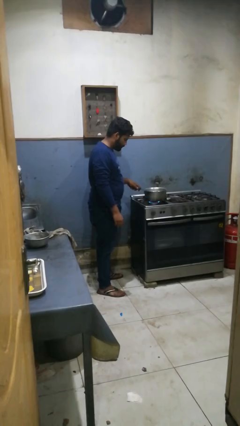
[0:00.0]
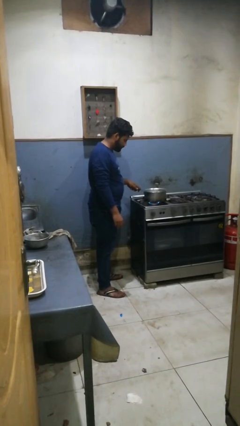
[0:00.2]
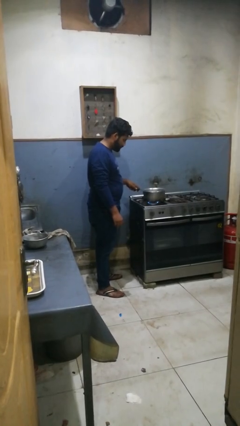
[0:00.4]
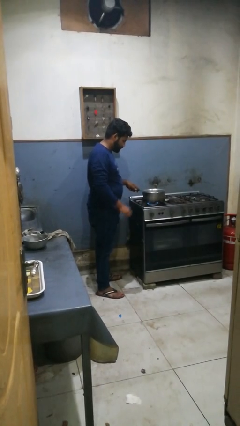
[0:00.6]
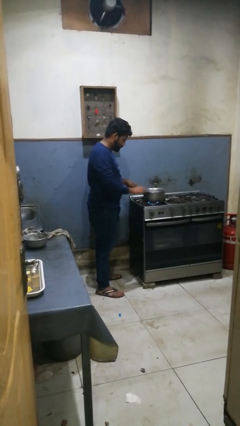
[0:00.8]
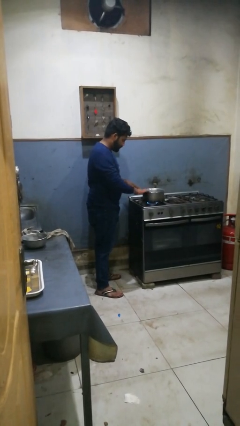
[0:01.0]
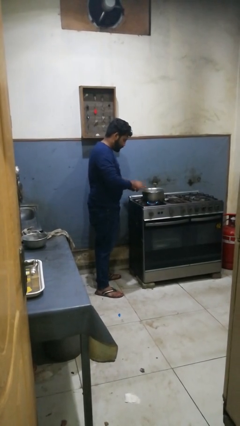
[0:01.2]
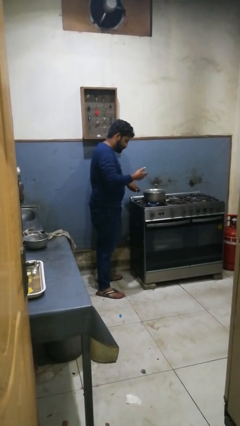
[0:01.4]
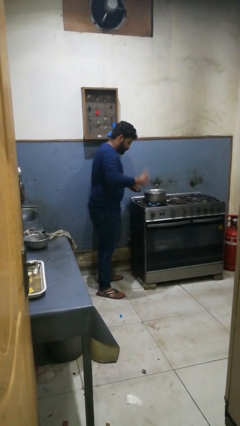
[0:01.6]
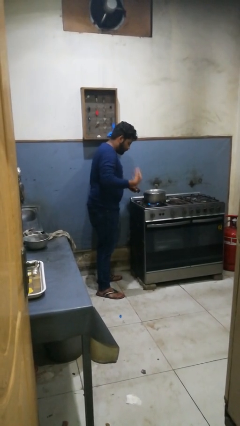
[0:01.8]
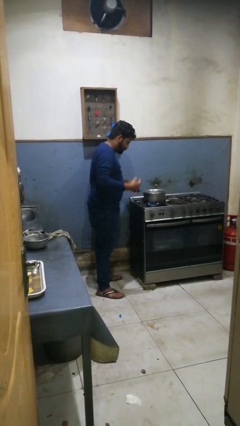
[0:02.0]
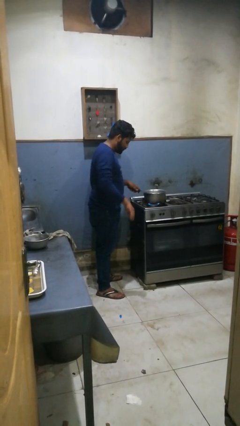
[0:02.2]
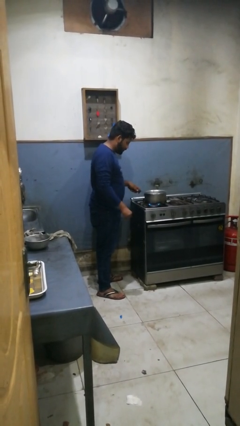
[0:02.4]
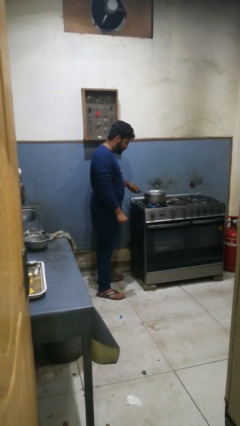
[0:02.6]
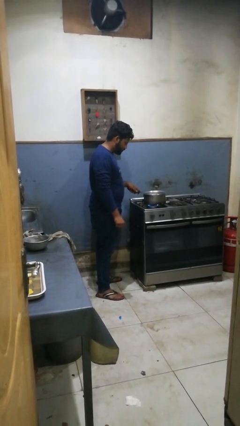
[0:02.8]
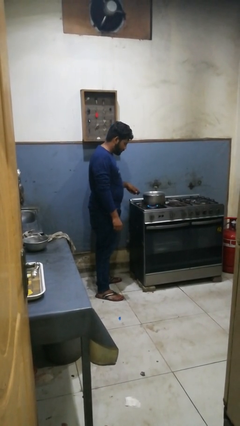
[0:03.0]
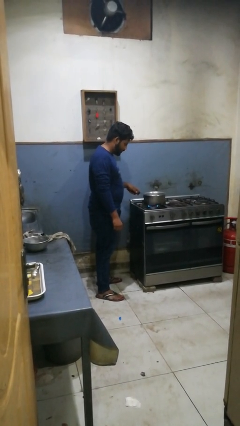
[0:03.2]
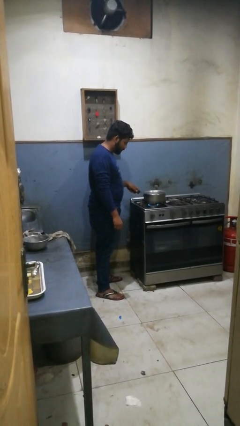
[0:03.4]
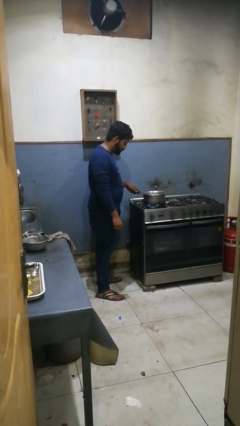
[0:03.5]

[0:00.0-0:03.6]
person burns hand

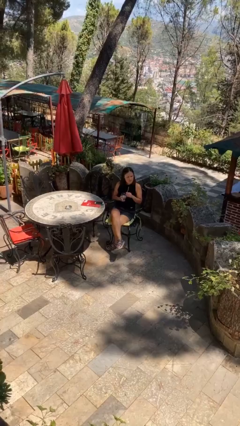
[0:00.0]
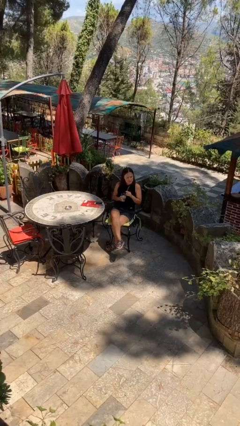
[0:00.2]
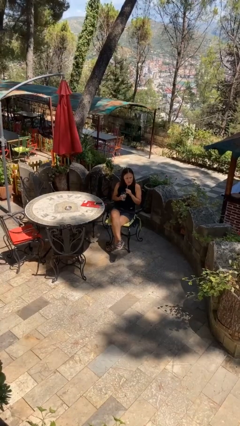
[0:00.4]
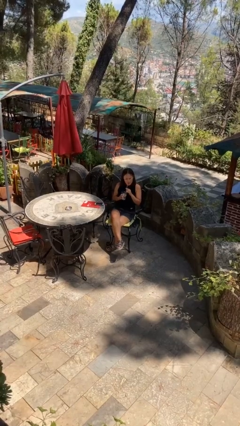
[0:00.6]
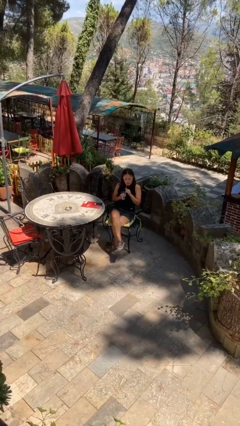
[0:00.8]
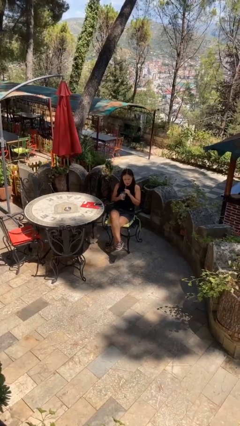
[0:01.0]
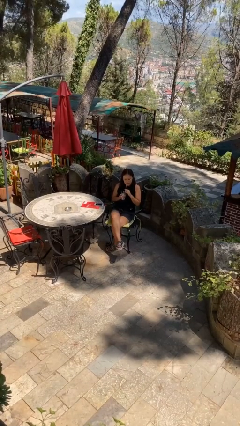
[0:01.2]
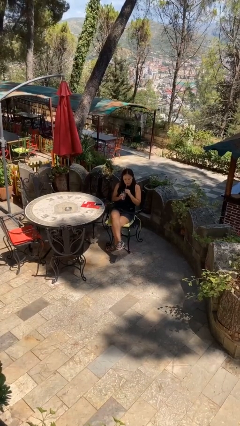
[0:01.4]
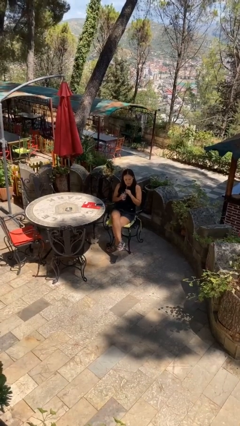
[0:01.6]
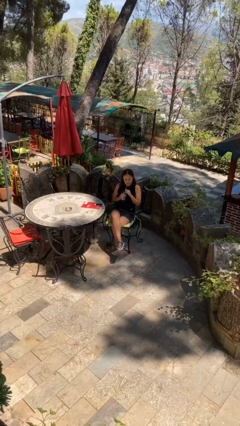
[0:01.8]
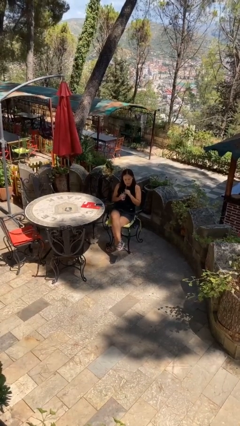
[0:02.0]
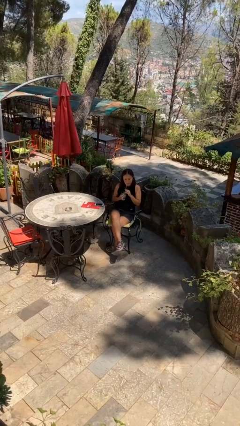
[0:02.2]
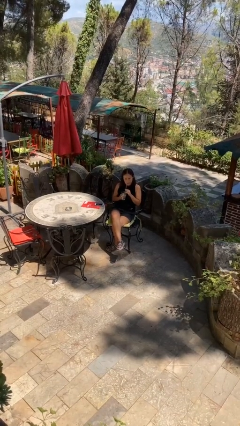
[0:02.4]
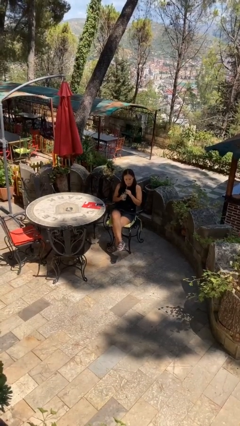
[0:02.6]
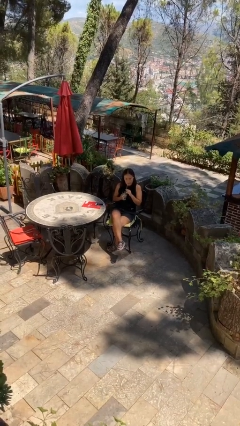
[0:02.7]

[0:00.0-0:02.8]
person drinks from straw

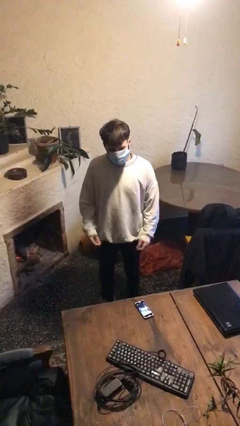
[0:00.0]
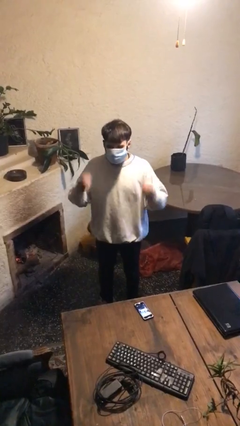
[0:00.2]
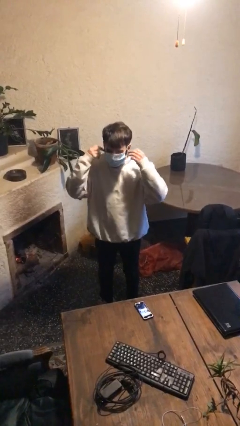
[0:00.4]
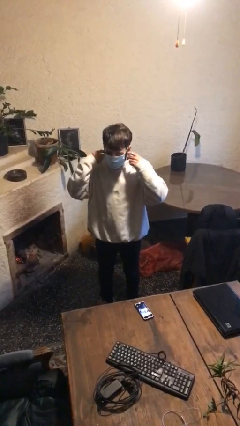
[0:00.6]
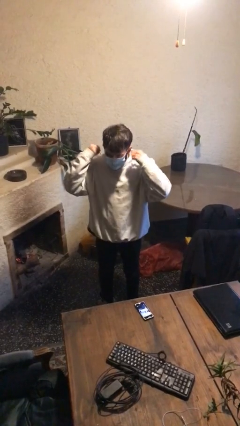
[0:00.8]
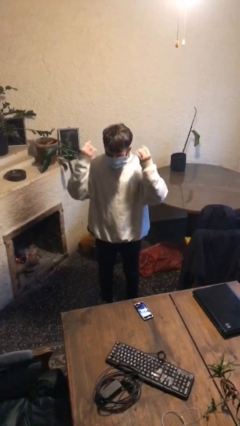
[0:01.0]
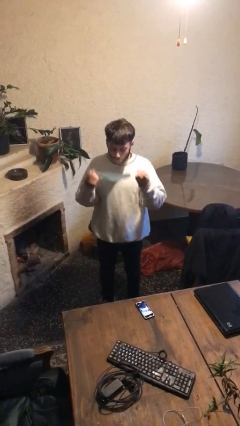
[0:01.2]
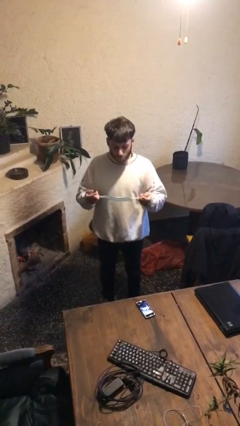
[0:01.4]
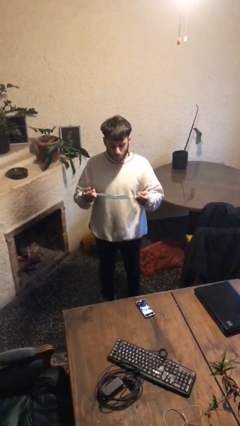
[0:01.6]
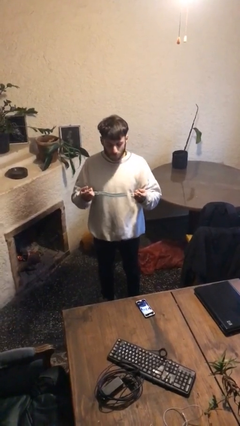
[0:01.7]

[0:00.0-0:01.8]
person takes off facemask

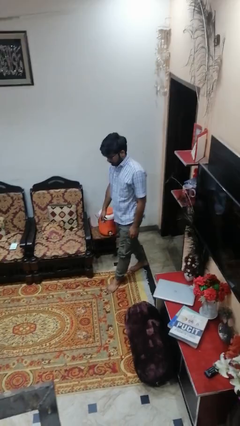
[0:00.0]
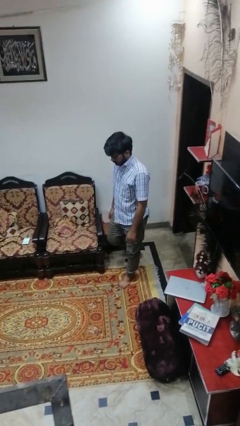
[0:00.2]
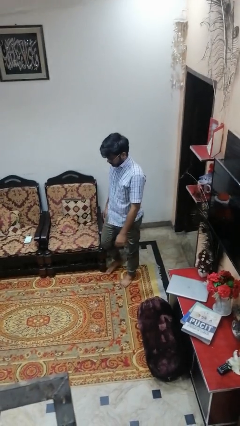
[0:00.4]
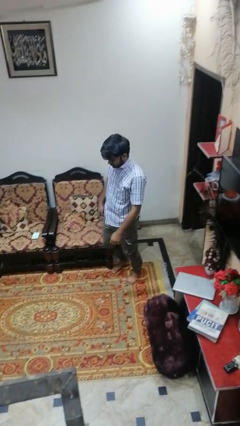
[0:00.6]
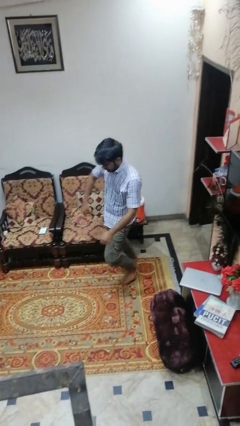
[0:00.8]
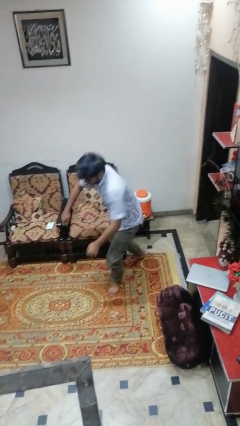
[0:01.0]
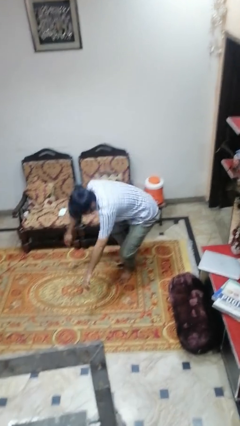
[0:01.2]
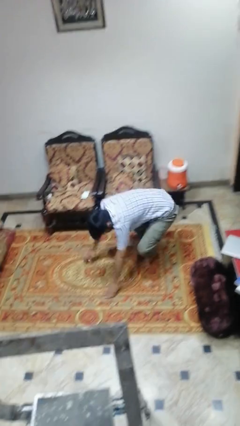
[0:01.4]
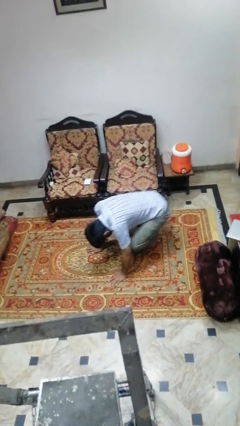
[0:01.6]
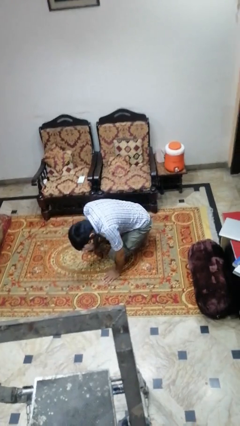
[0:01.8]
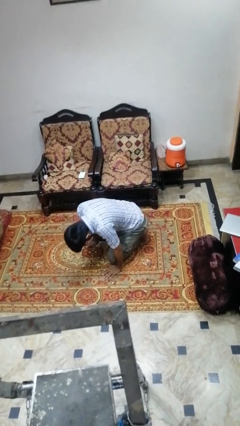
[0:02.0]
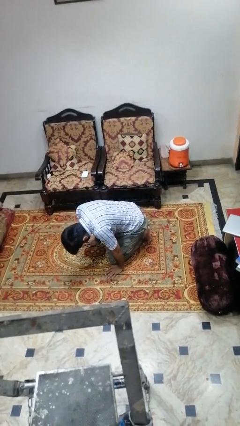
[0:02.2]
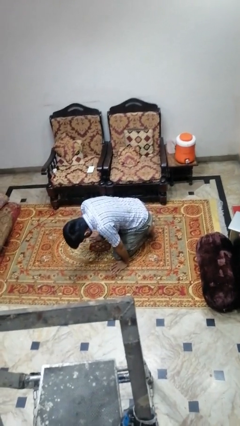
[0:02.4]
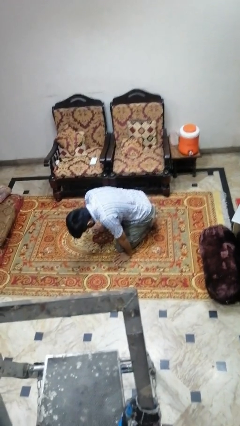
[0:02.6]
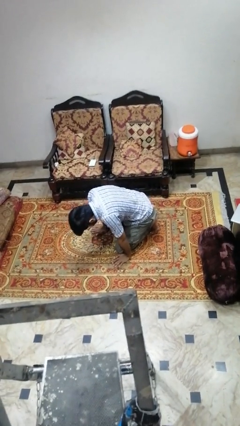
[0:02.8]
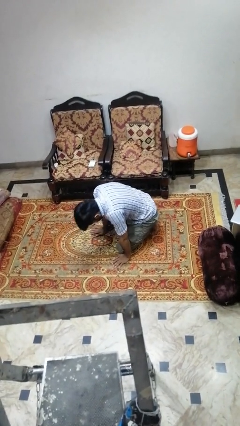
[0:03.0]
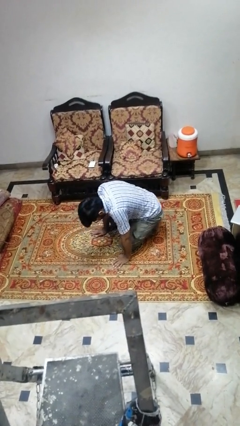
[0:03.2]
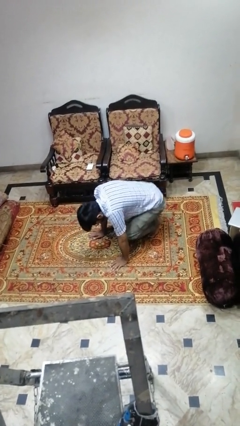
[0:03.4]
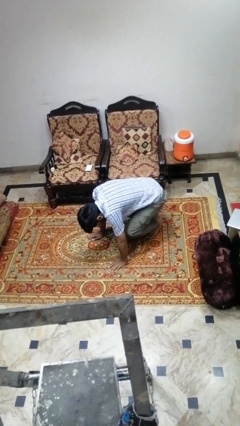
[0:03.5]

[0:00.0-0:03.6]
person trips on object on floor

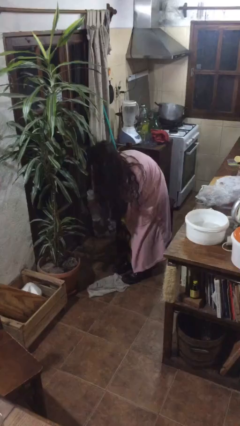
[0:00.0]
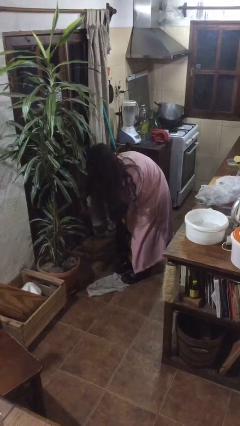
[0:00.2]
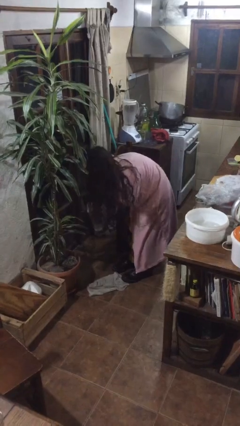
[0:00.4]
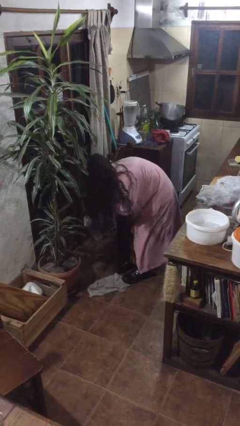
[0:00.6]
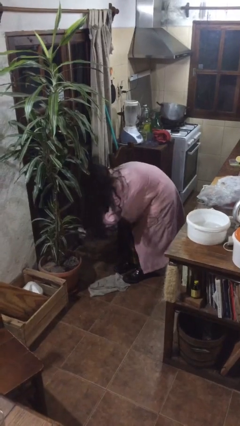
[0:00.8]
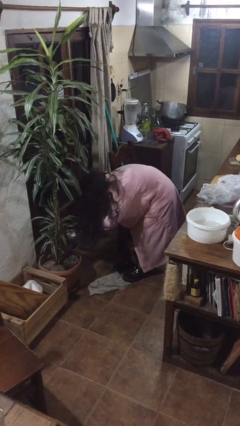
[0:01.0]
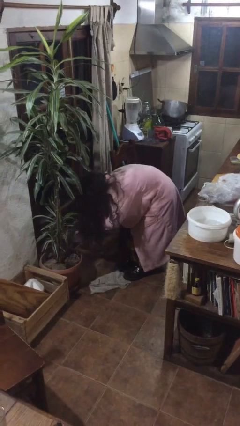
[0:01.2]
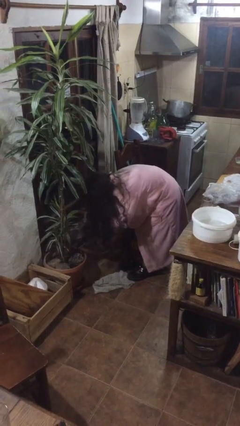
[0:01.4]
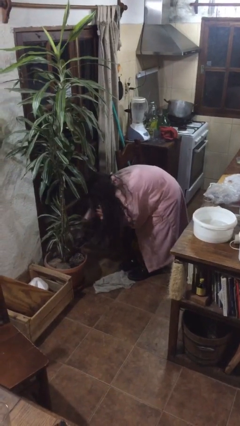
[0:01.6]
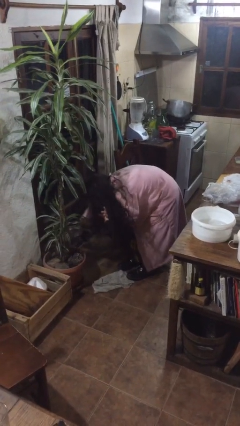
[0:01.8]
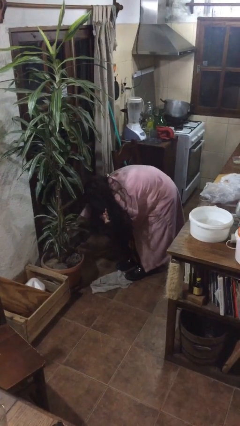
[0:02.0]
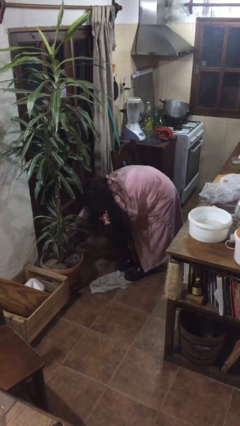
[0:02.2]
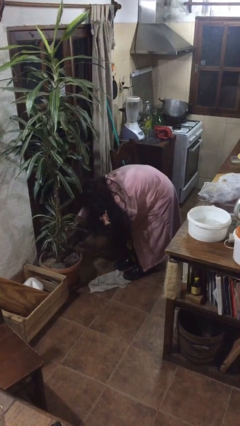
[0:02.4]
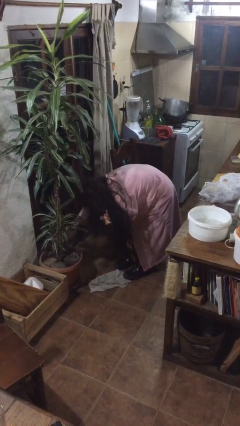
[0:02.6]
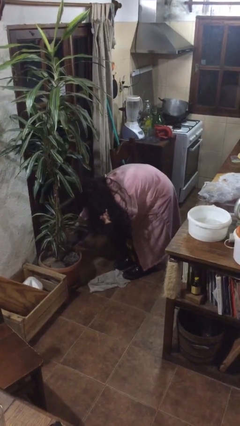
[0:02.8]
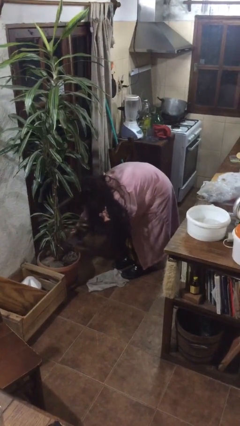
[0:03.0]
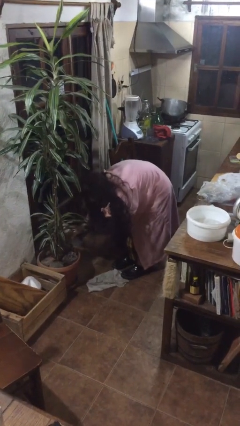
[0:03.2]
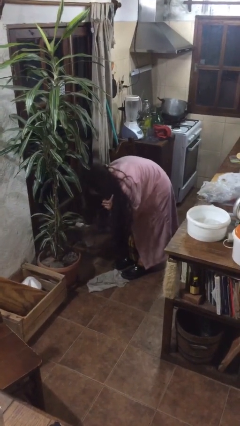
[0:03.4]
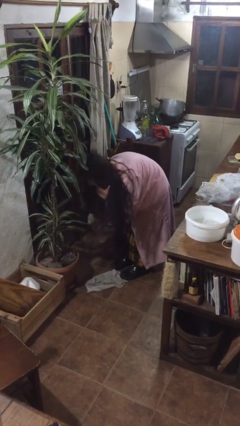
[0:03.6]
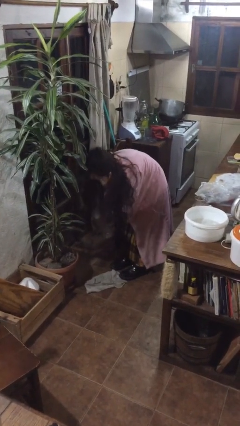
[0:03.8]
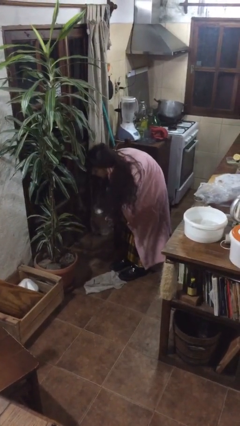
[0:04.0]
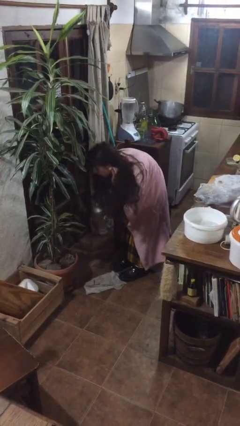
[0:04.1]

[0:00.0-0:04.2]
person waters houseplant

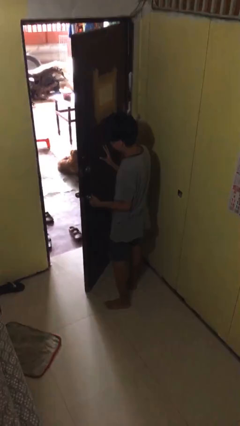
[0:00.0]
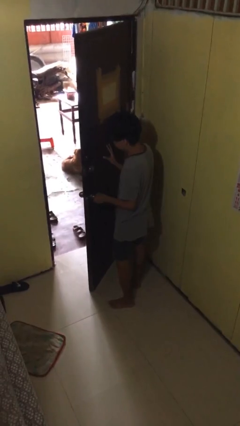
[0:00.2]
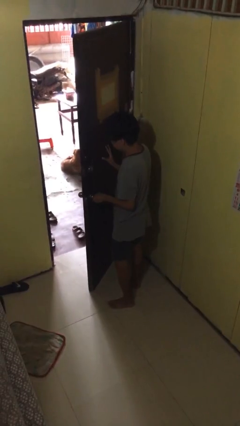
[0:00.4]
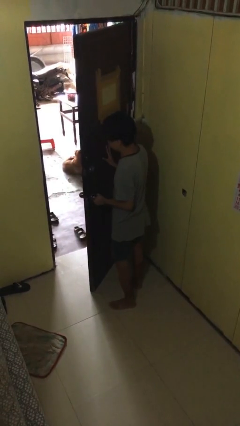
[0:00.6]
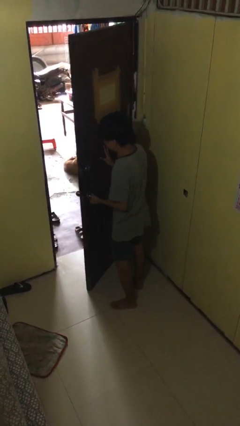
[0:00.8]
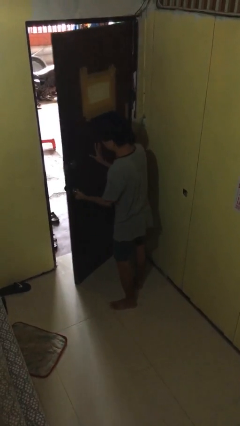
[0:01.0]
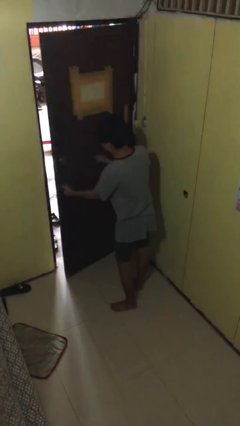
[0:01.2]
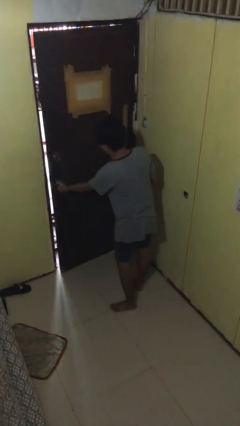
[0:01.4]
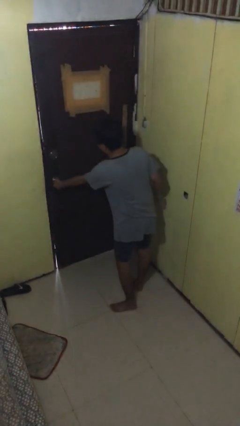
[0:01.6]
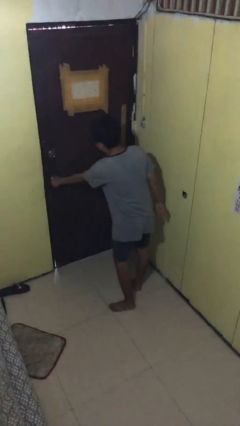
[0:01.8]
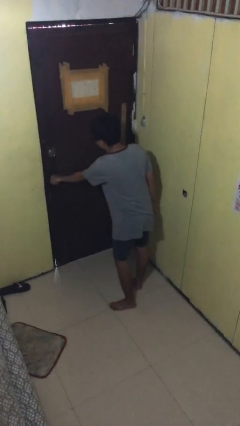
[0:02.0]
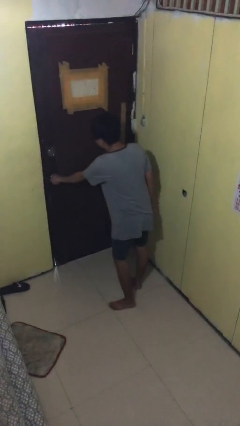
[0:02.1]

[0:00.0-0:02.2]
person closes facility door
